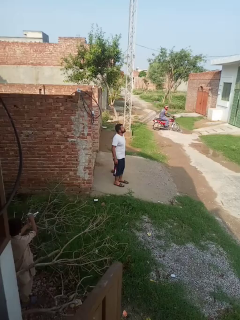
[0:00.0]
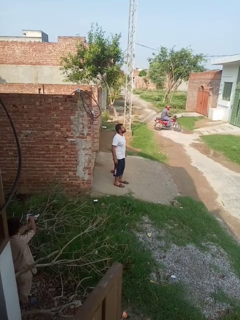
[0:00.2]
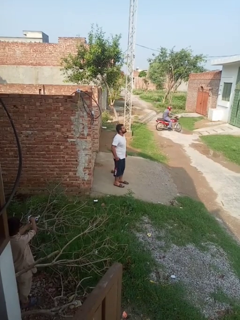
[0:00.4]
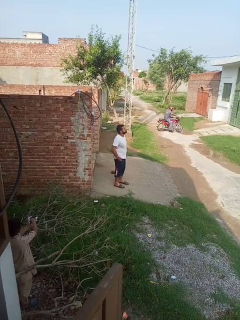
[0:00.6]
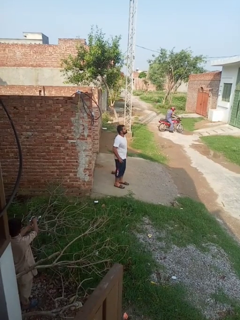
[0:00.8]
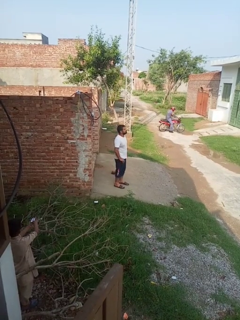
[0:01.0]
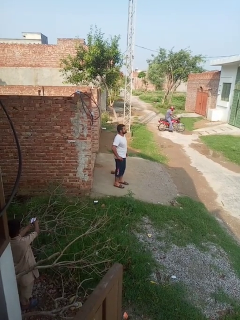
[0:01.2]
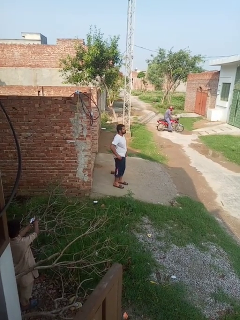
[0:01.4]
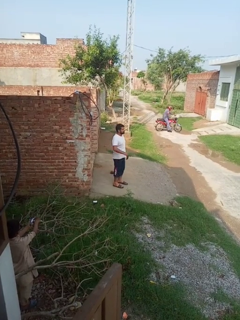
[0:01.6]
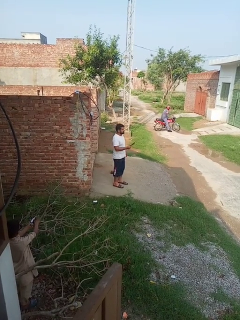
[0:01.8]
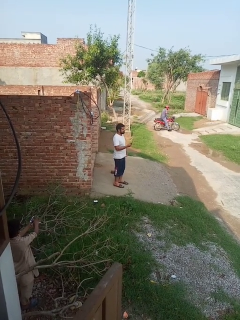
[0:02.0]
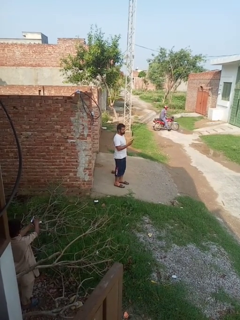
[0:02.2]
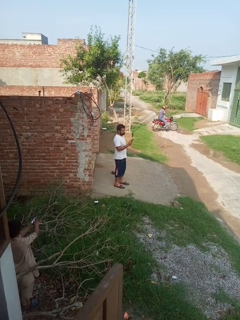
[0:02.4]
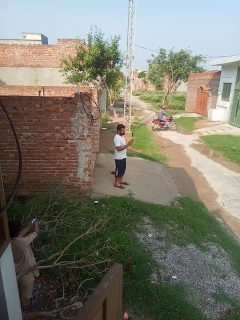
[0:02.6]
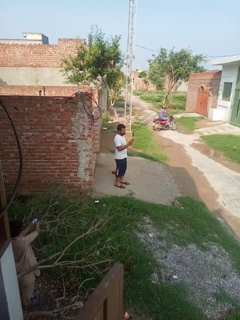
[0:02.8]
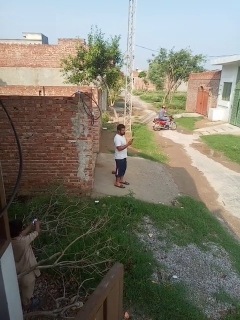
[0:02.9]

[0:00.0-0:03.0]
person takes phone from pocket

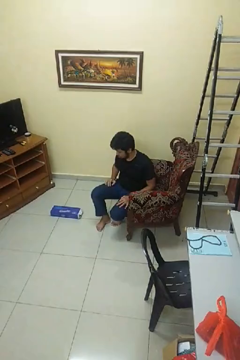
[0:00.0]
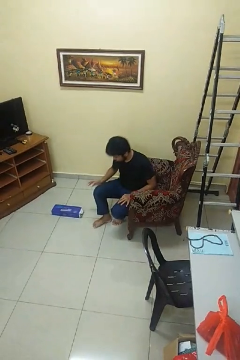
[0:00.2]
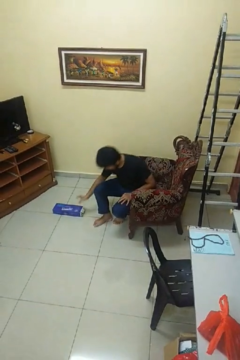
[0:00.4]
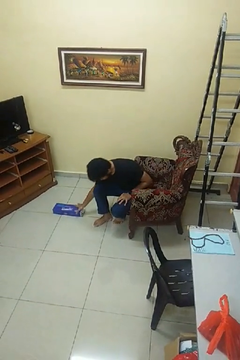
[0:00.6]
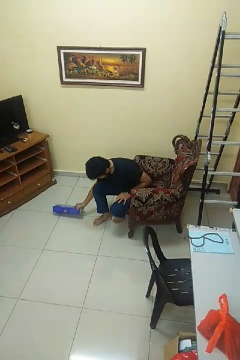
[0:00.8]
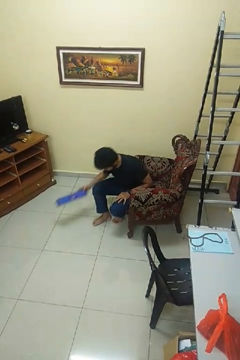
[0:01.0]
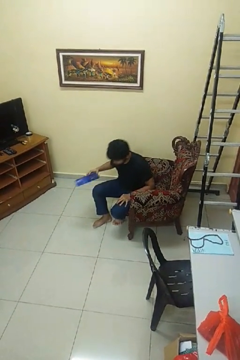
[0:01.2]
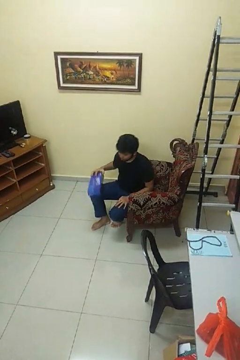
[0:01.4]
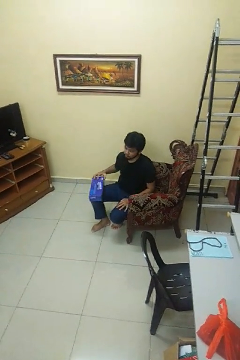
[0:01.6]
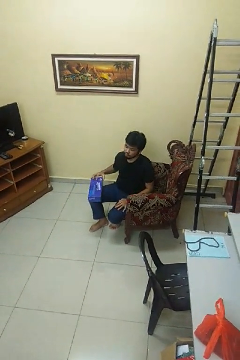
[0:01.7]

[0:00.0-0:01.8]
person picks up object from floor

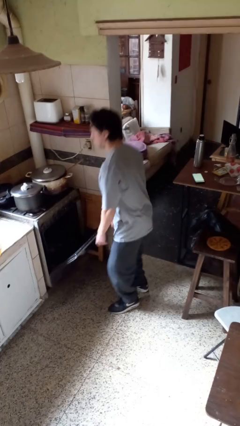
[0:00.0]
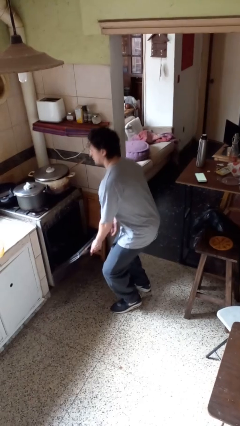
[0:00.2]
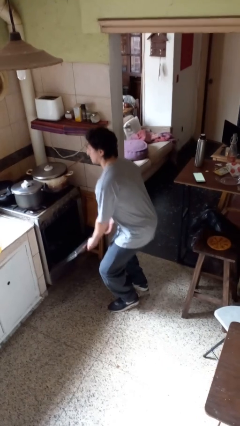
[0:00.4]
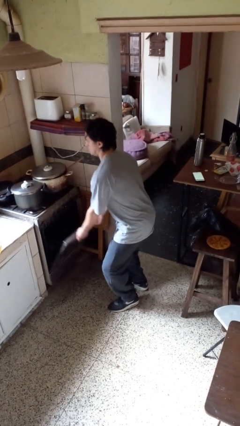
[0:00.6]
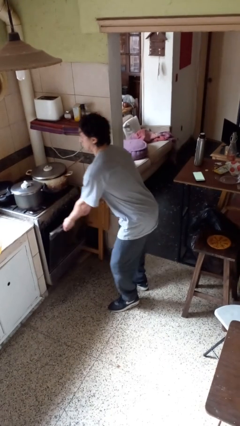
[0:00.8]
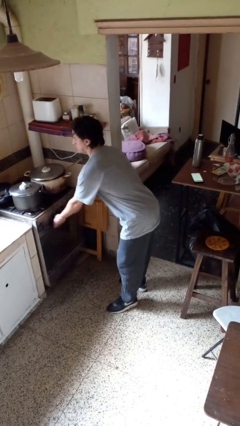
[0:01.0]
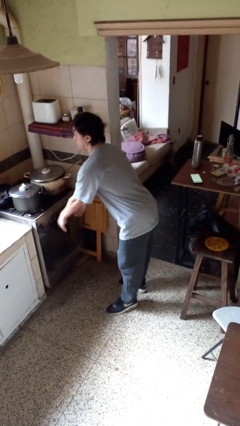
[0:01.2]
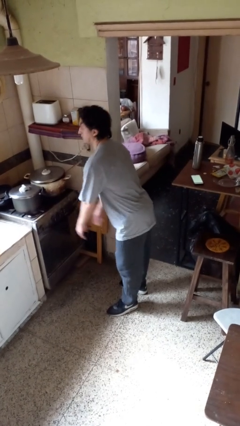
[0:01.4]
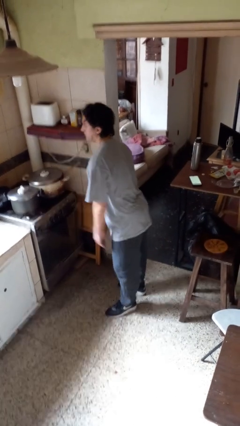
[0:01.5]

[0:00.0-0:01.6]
person closes oven door

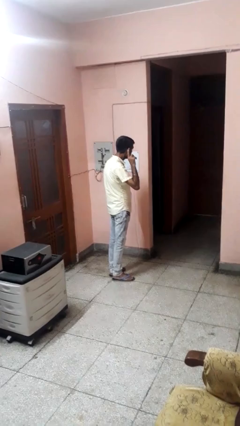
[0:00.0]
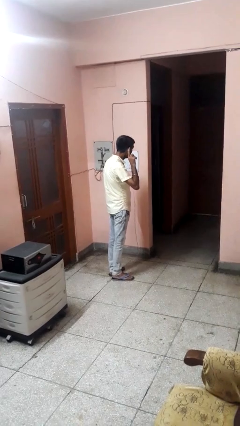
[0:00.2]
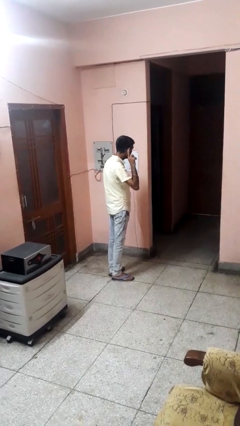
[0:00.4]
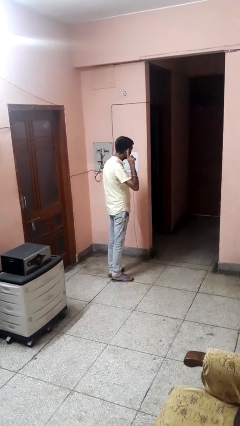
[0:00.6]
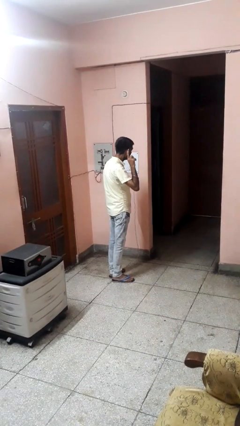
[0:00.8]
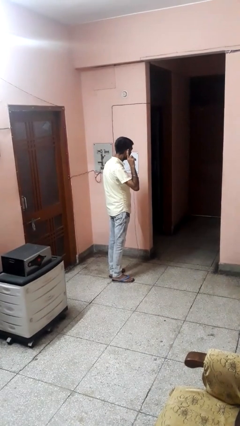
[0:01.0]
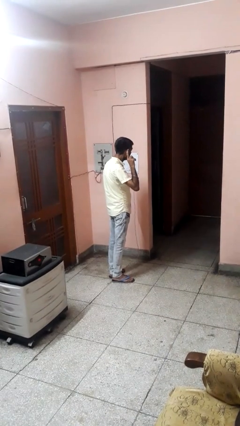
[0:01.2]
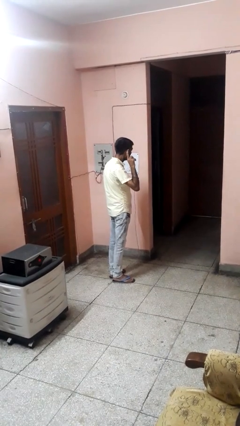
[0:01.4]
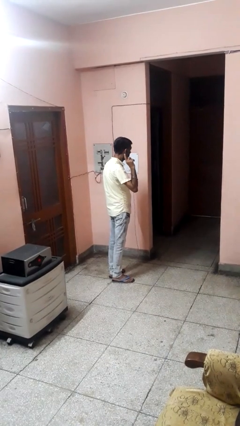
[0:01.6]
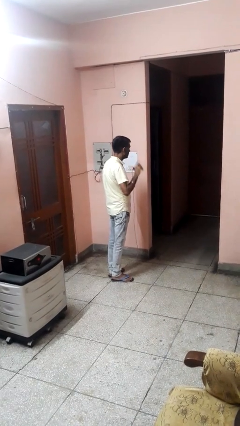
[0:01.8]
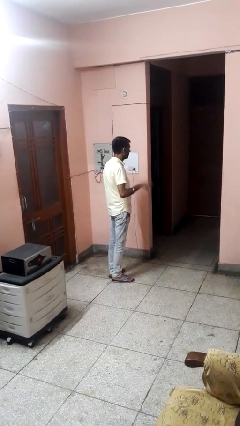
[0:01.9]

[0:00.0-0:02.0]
person gestures listen closely

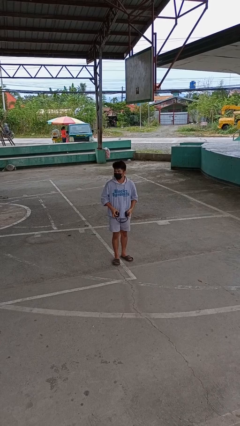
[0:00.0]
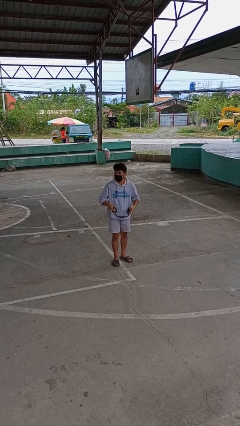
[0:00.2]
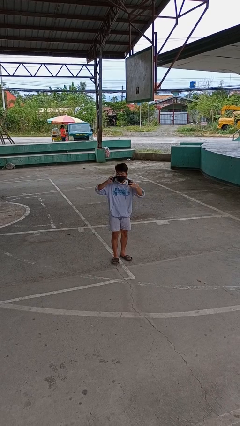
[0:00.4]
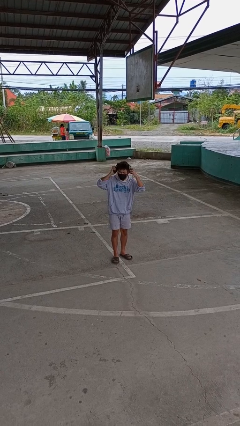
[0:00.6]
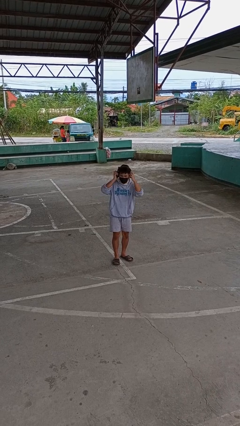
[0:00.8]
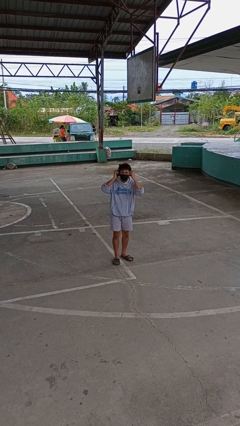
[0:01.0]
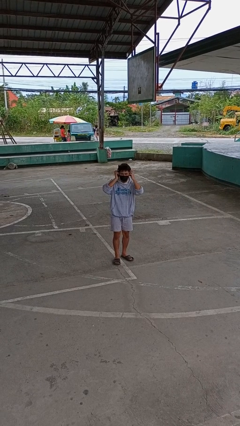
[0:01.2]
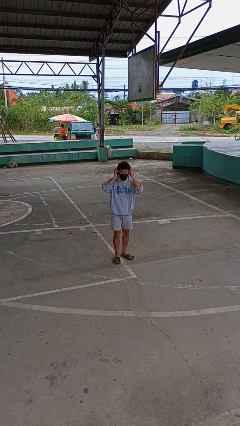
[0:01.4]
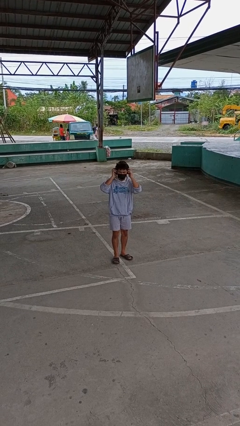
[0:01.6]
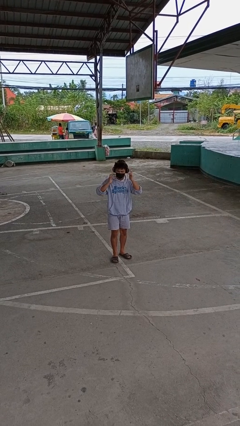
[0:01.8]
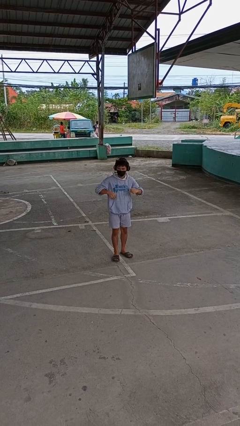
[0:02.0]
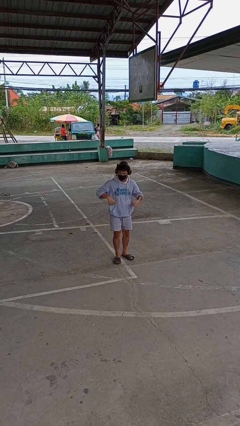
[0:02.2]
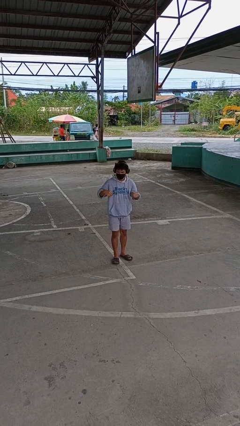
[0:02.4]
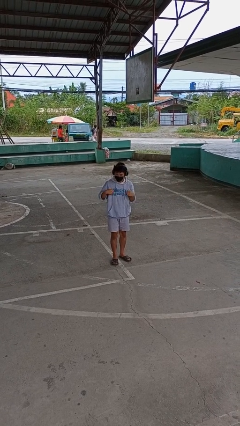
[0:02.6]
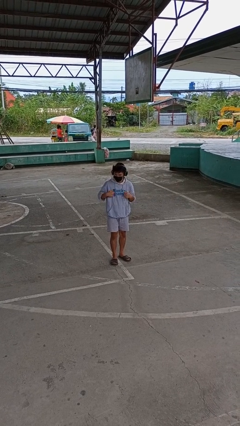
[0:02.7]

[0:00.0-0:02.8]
person puts on headphones

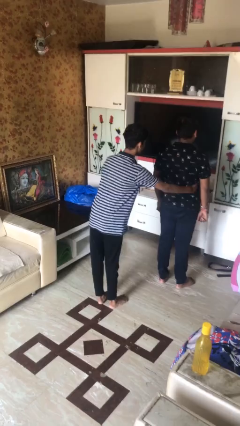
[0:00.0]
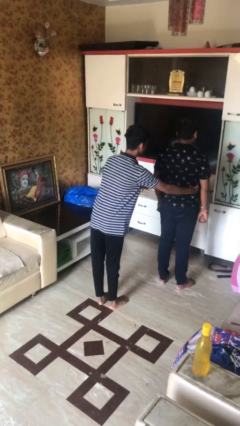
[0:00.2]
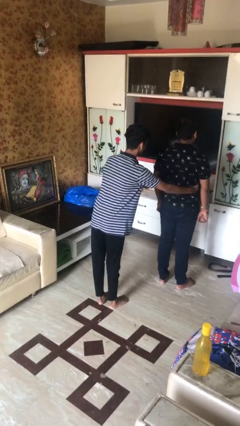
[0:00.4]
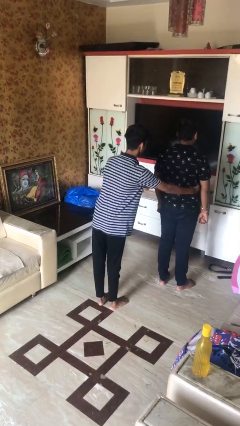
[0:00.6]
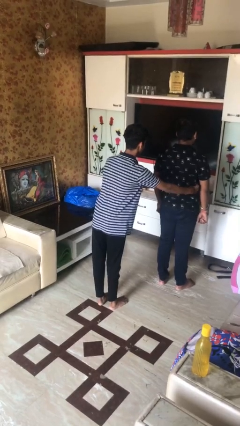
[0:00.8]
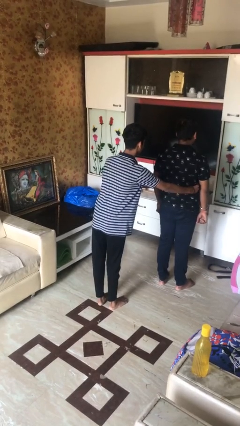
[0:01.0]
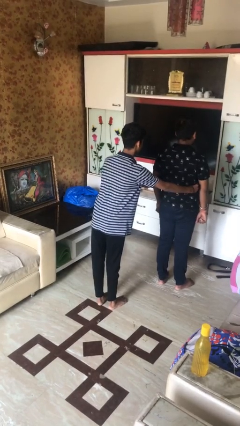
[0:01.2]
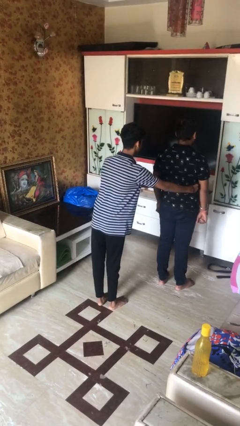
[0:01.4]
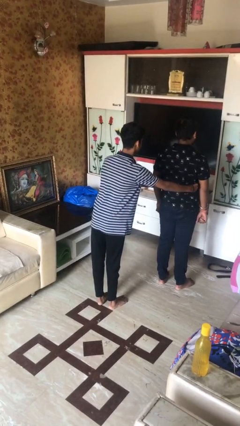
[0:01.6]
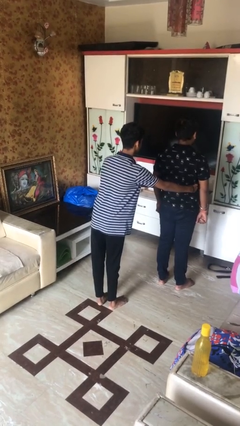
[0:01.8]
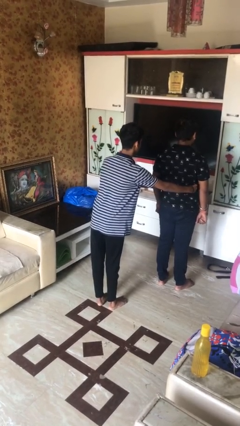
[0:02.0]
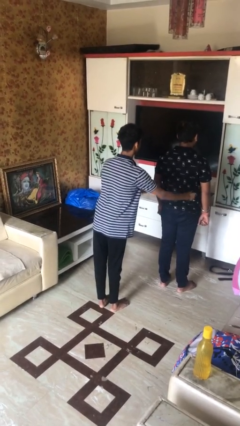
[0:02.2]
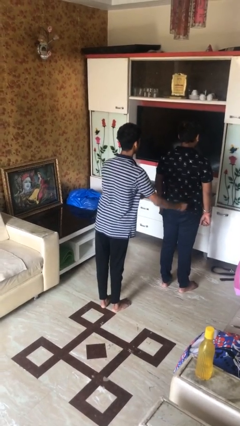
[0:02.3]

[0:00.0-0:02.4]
person tickles person

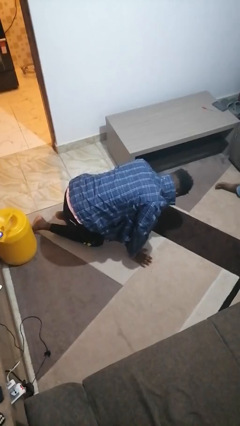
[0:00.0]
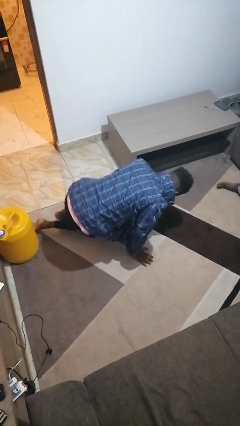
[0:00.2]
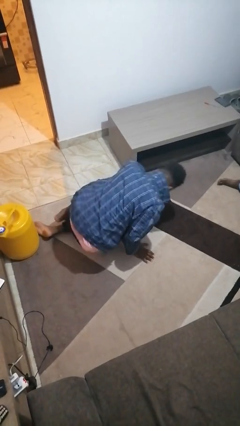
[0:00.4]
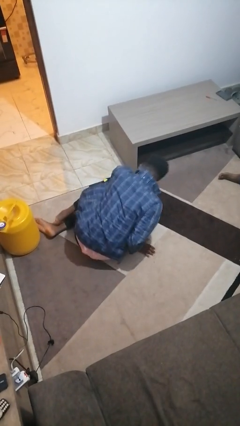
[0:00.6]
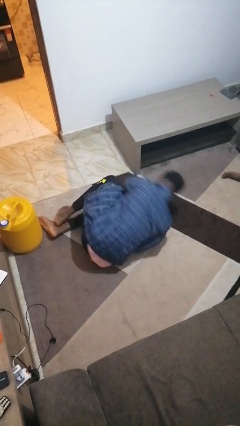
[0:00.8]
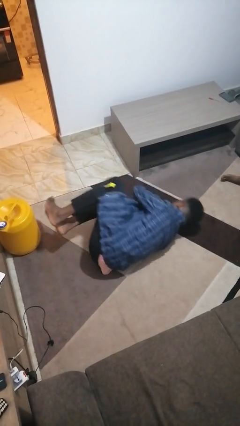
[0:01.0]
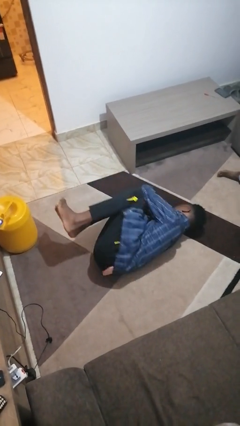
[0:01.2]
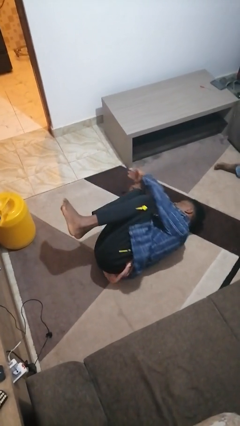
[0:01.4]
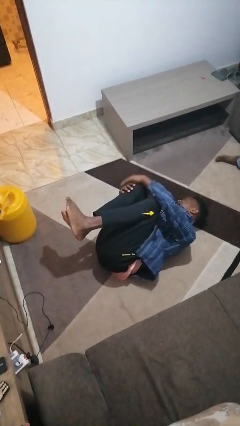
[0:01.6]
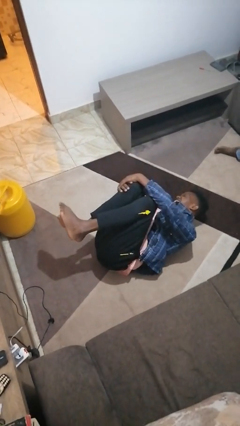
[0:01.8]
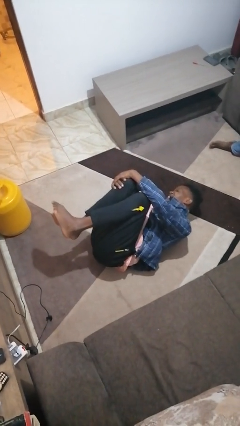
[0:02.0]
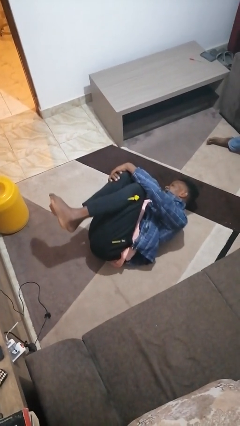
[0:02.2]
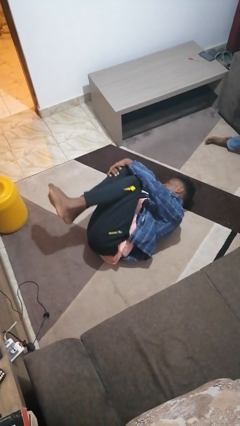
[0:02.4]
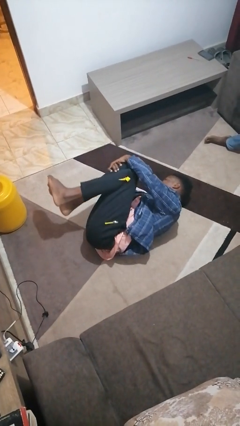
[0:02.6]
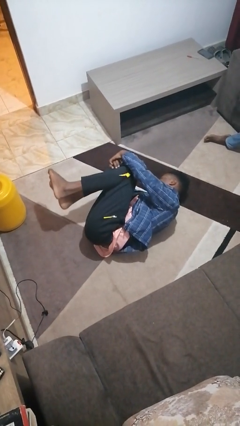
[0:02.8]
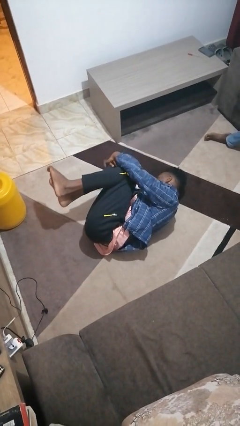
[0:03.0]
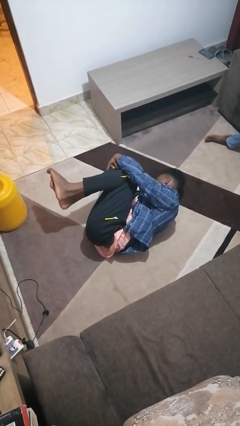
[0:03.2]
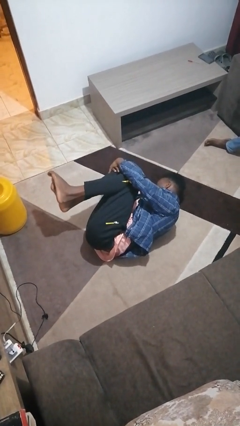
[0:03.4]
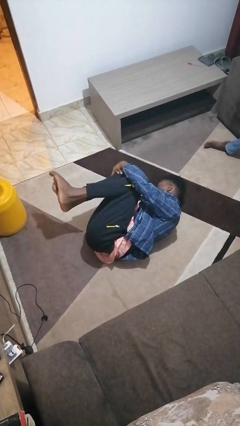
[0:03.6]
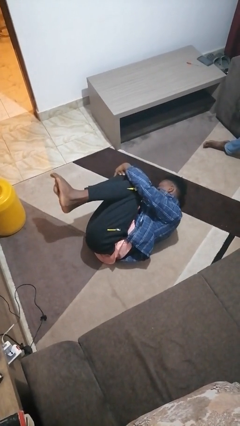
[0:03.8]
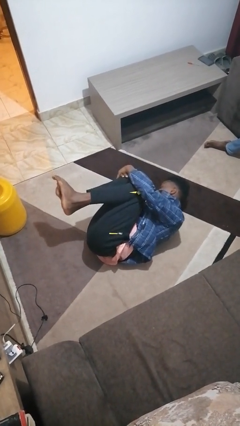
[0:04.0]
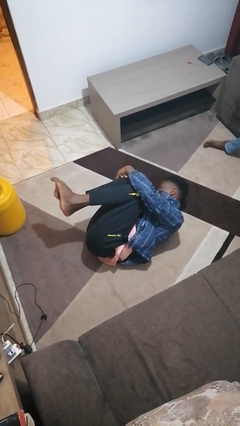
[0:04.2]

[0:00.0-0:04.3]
person lies down on floor

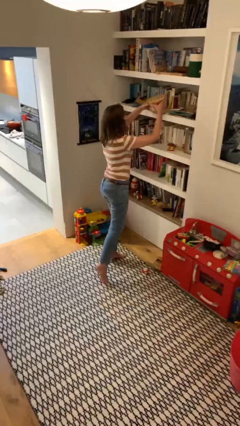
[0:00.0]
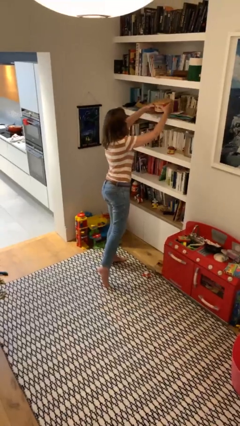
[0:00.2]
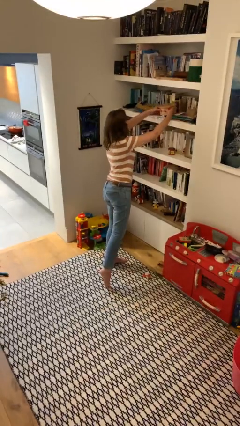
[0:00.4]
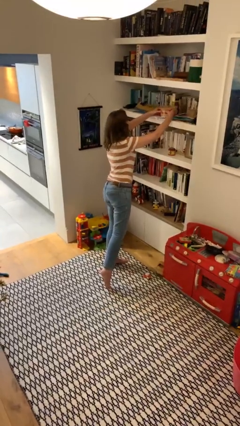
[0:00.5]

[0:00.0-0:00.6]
person puts down object on shelf
